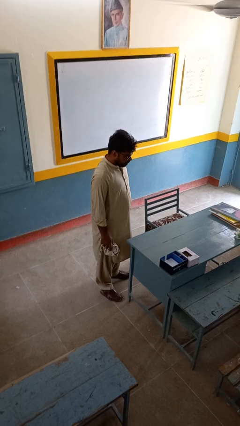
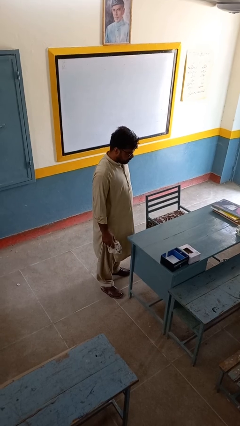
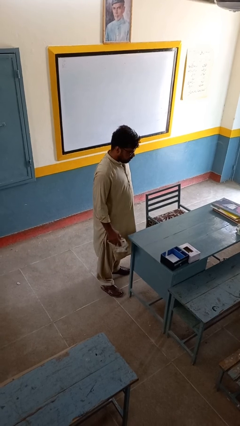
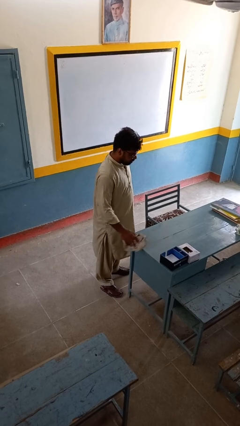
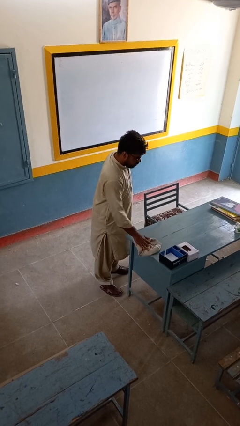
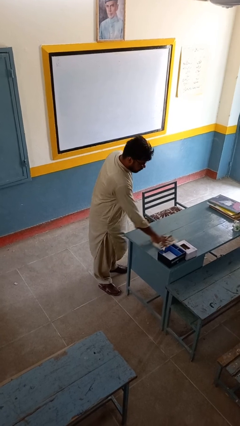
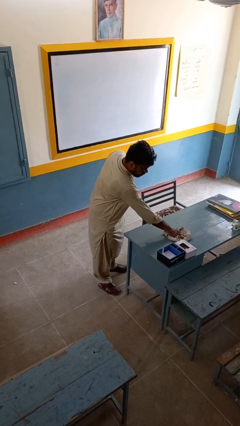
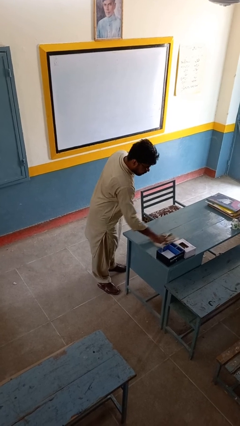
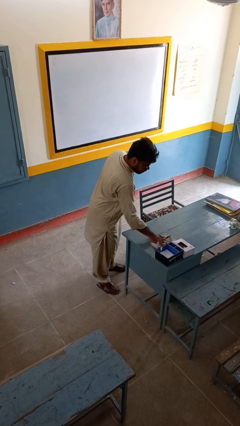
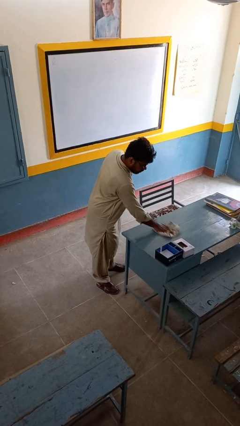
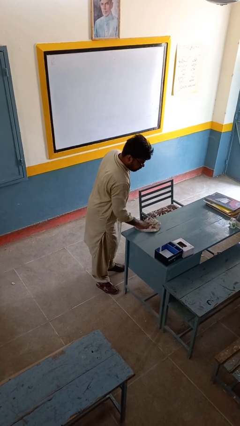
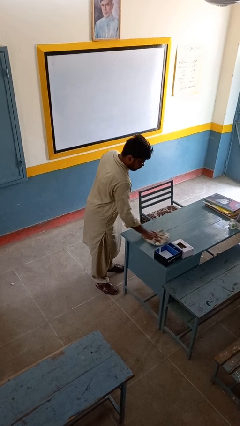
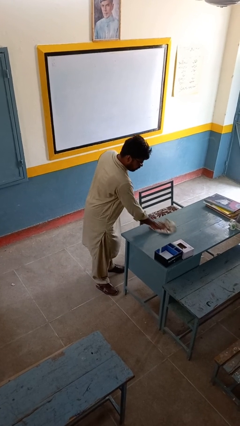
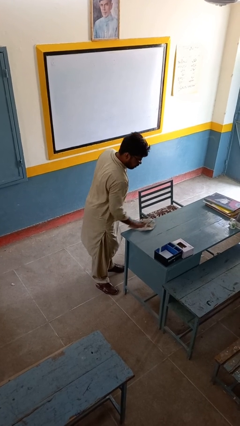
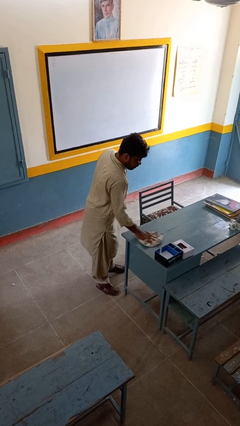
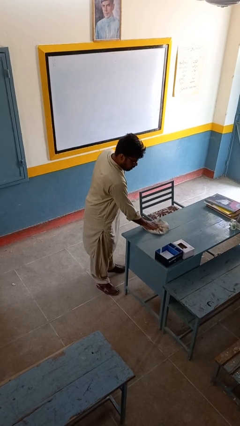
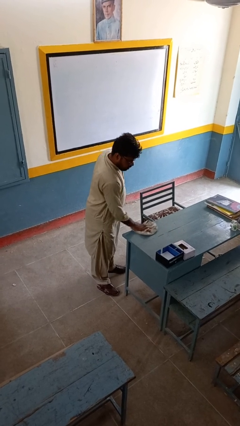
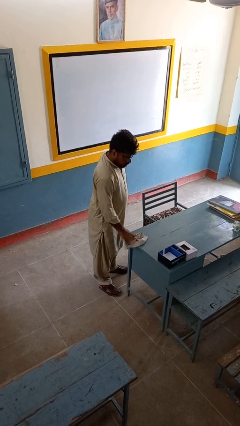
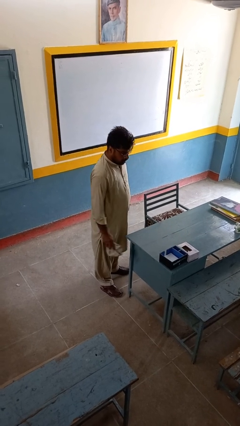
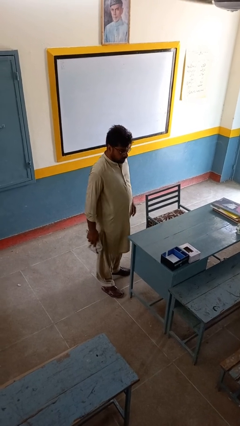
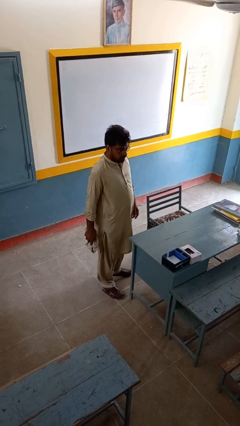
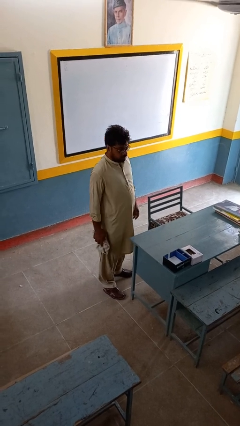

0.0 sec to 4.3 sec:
person cleans table with rag

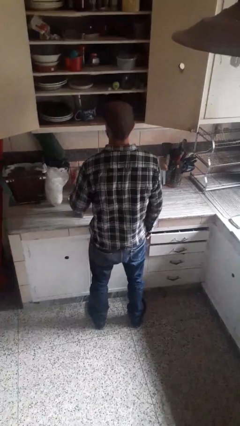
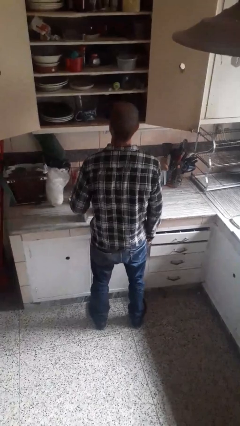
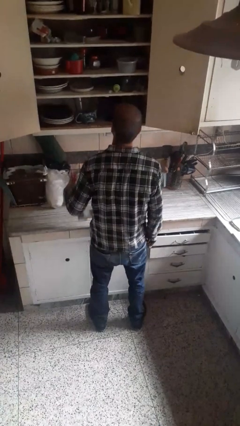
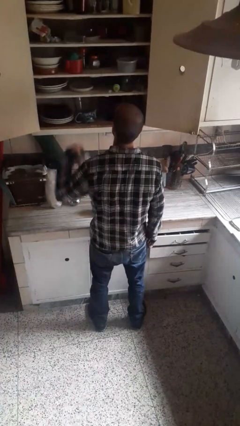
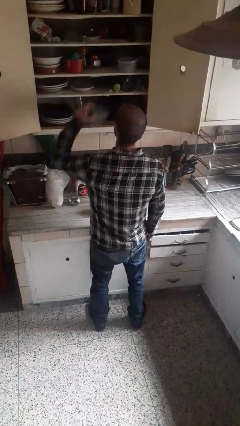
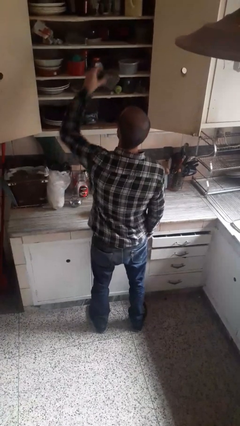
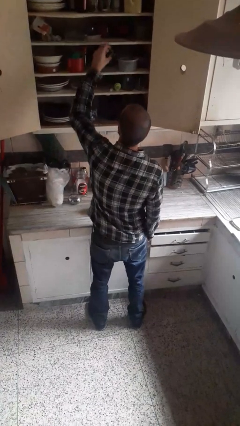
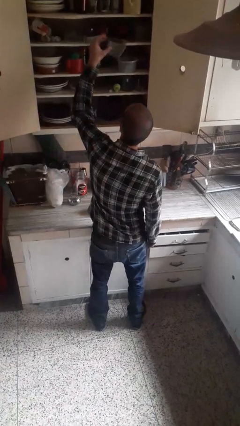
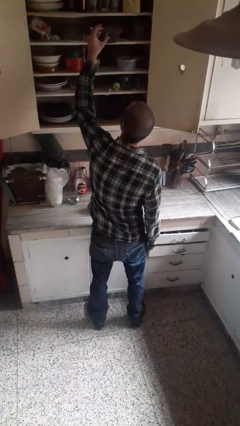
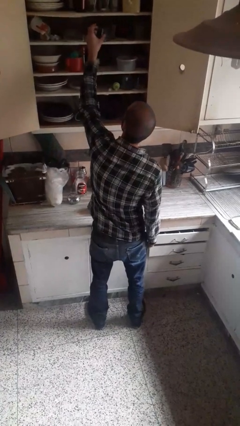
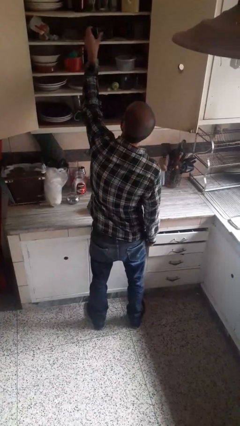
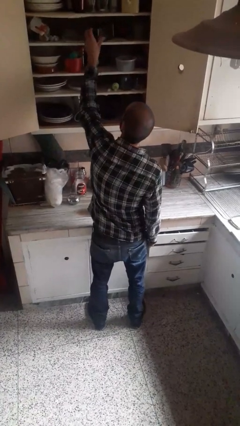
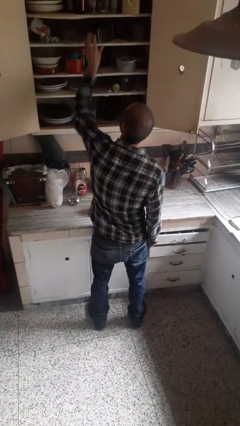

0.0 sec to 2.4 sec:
person puts object in cabinet

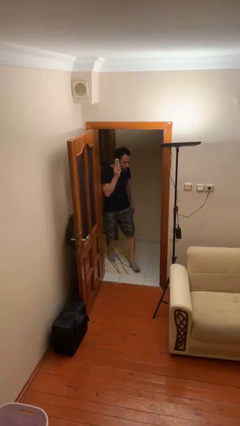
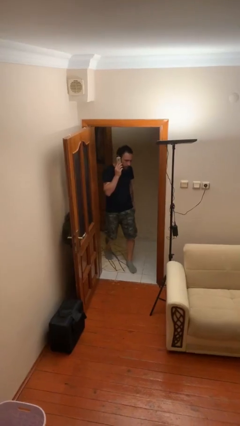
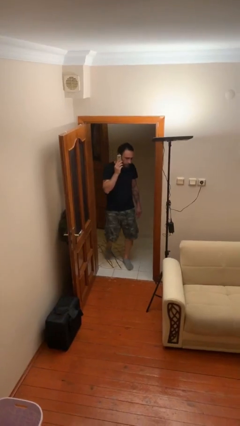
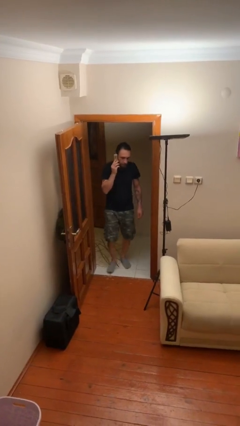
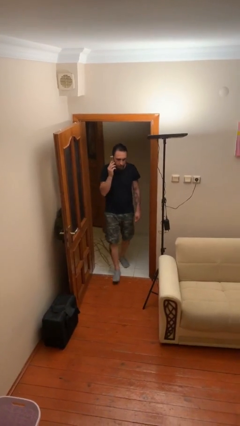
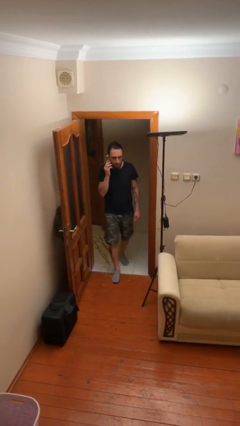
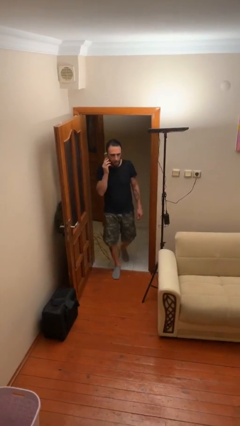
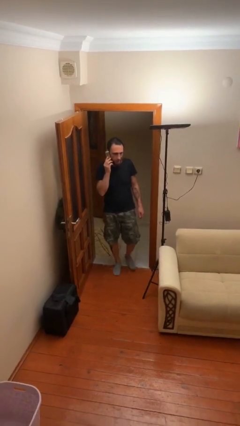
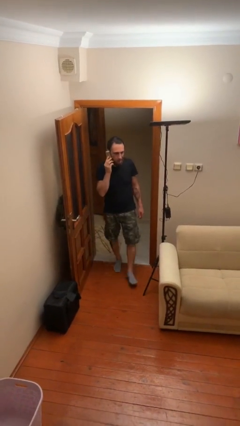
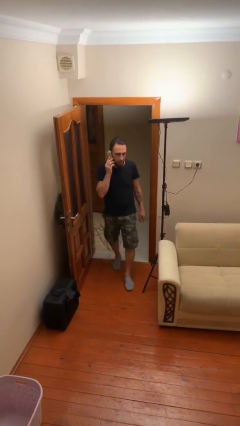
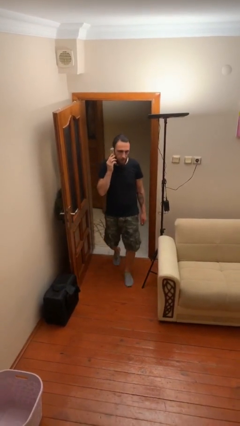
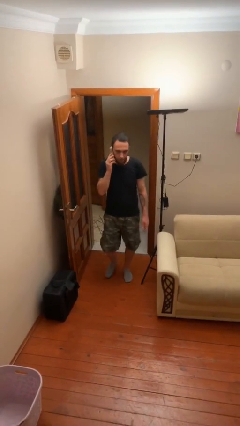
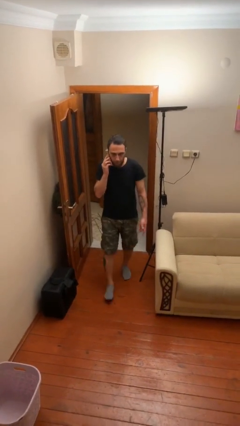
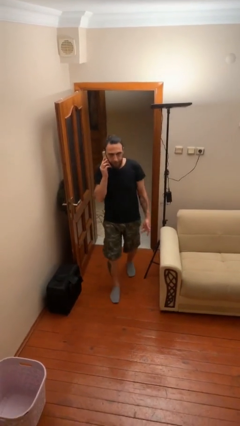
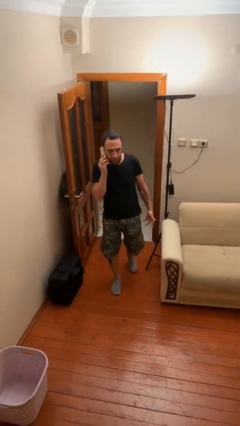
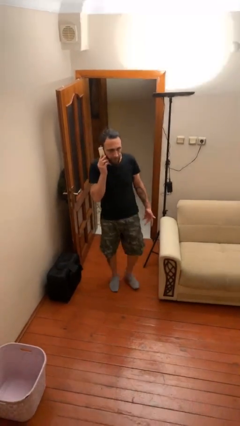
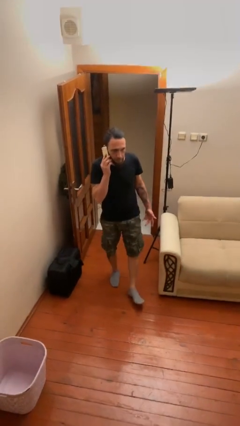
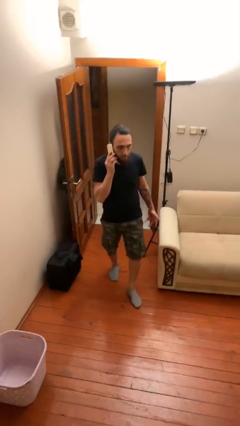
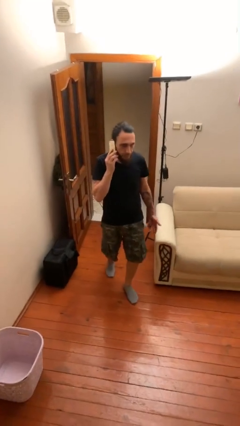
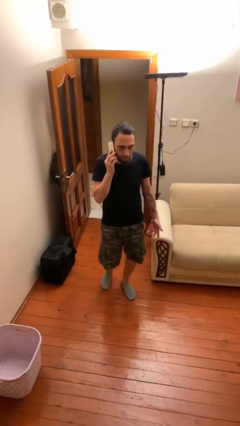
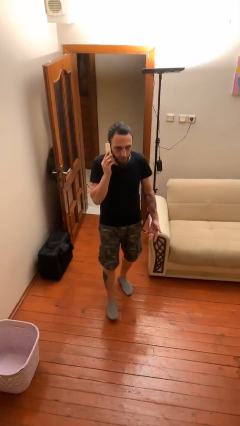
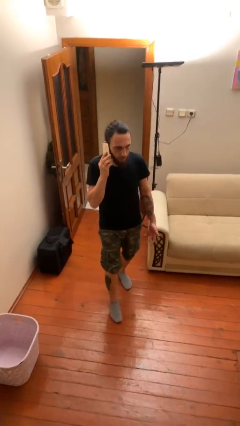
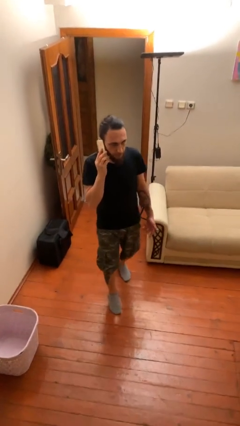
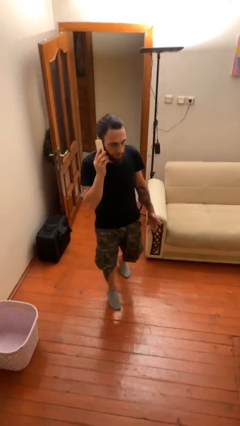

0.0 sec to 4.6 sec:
person enters scene through structure

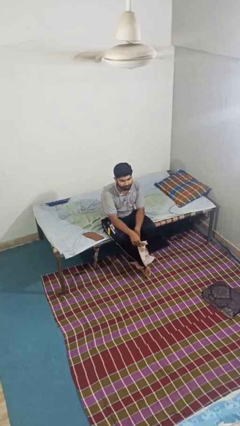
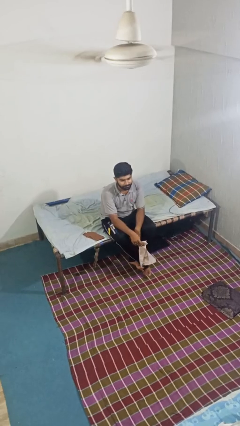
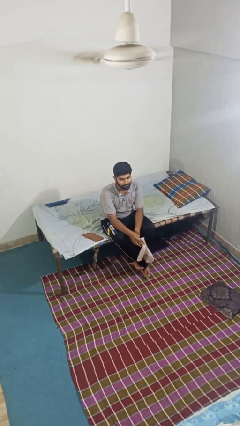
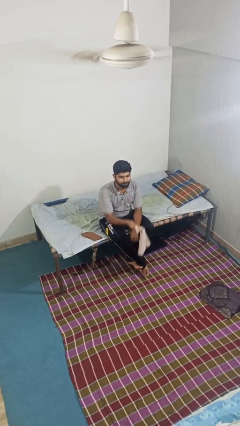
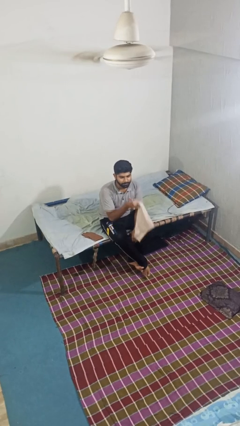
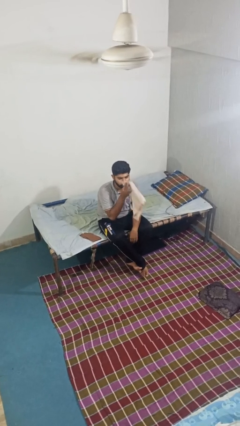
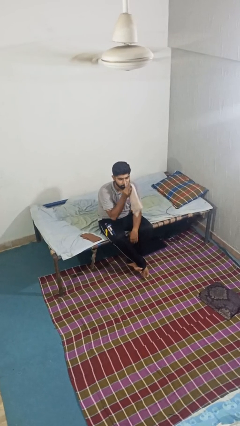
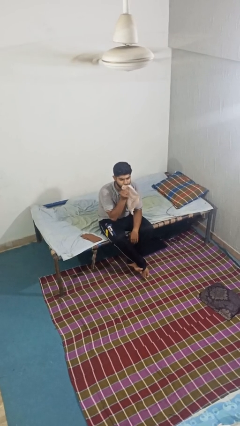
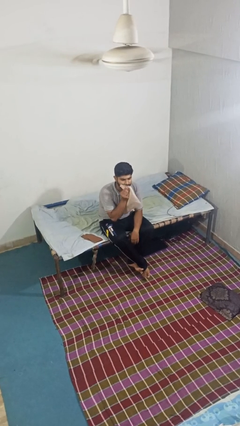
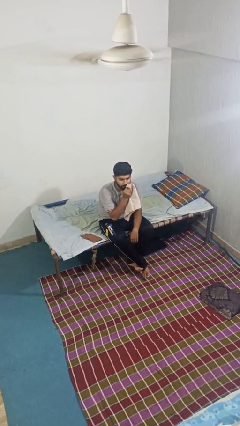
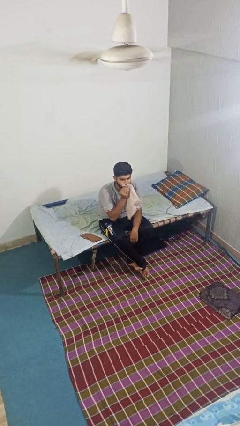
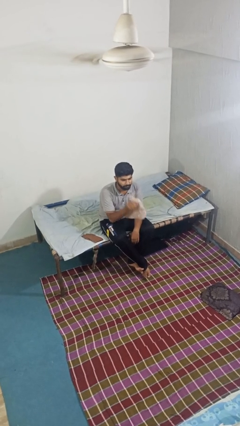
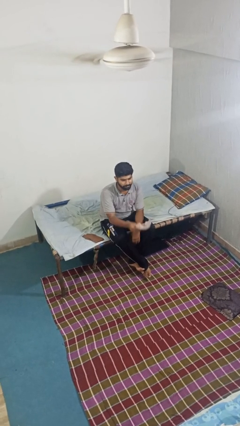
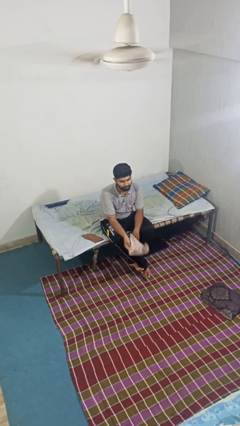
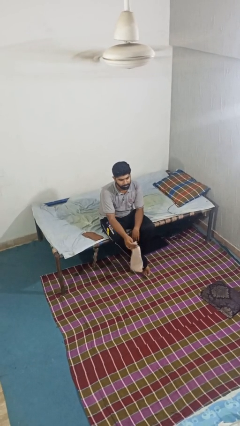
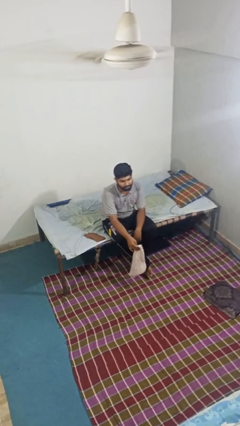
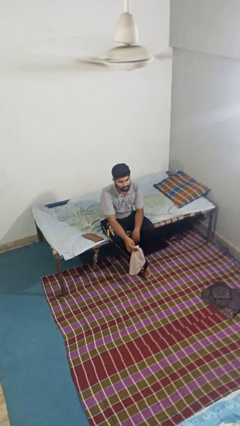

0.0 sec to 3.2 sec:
person wipes mouth with napkin

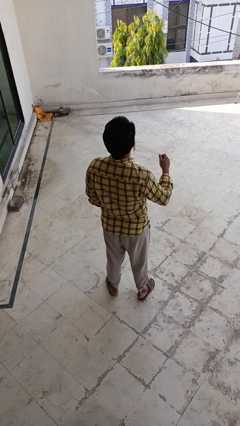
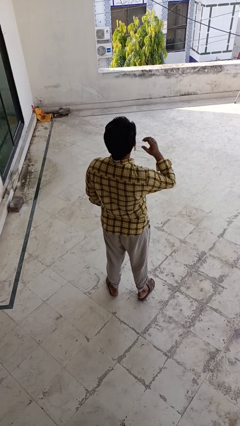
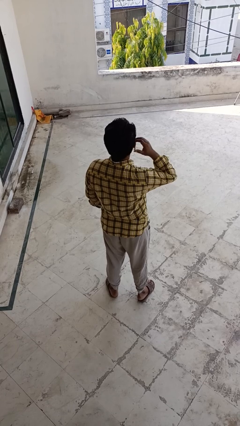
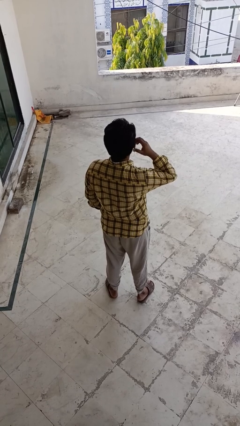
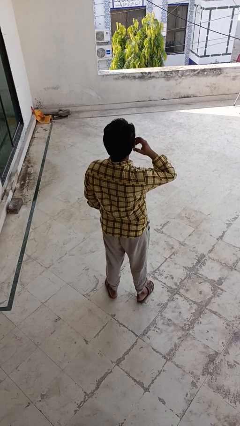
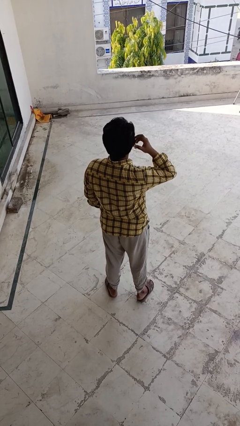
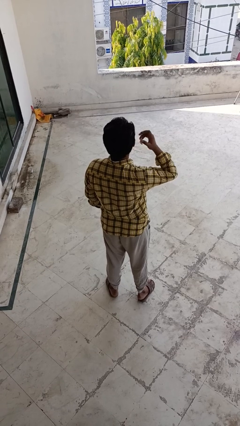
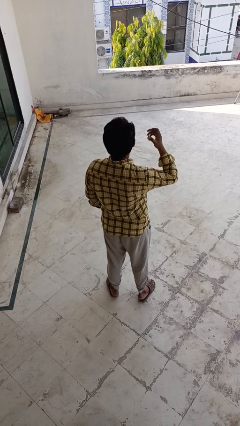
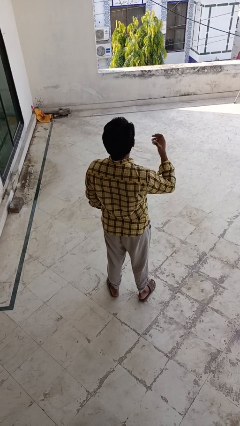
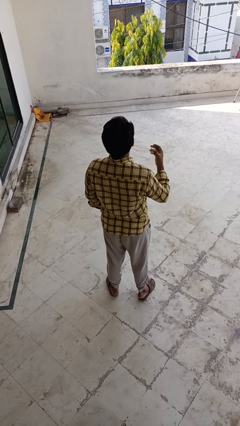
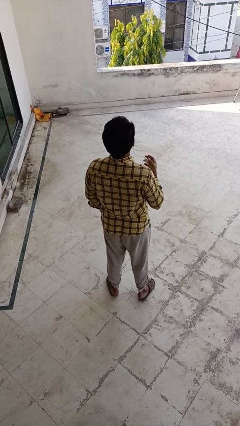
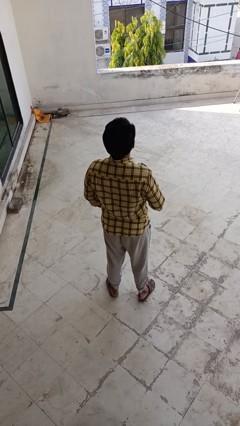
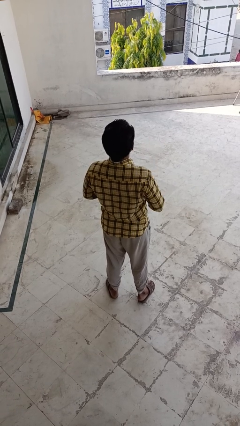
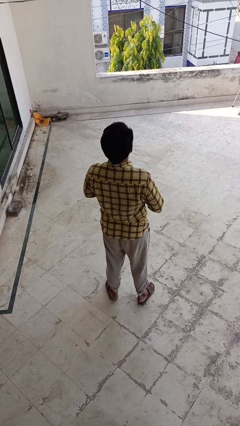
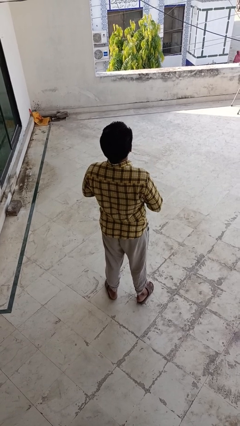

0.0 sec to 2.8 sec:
person takes off earrings

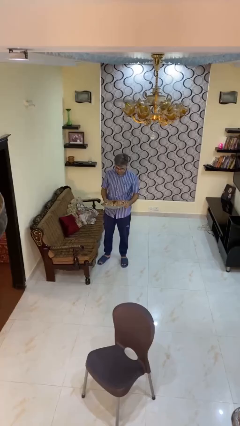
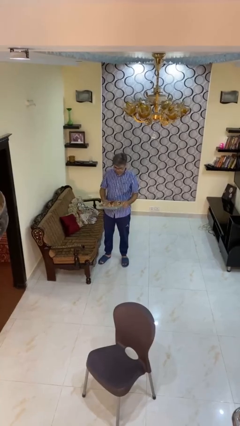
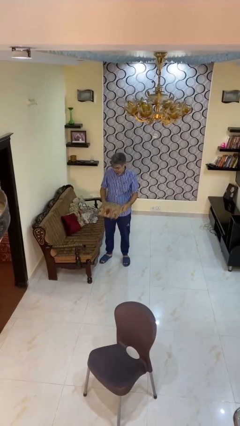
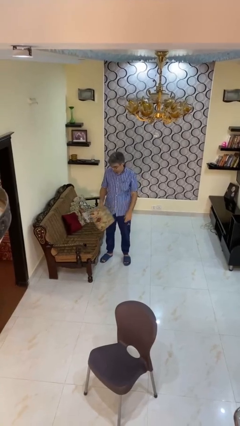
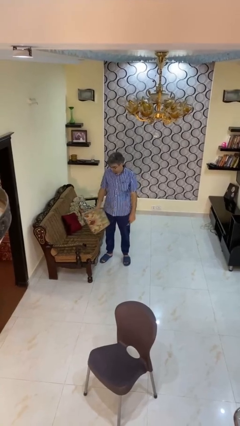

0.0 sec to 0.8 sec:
person puts down object on couch
